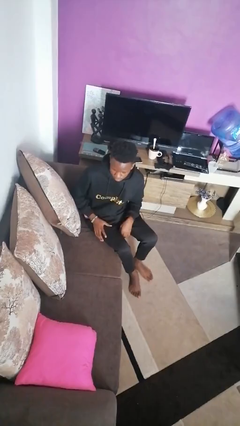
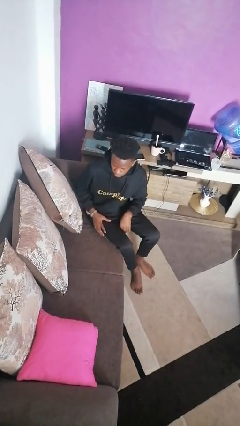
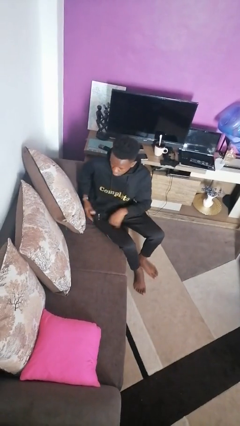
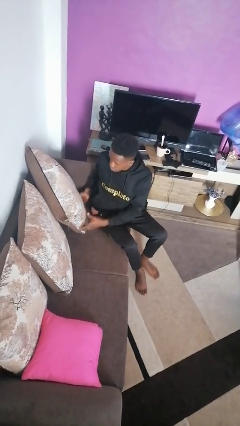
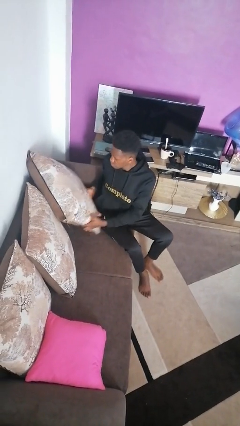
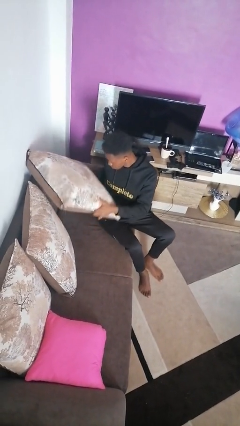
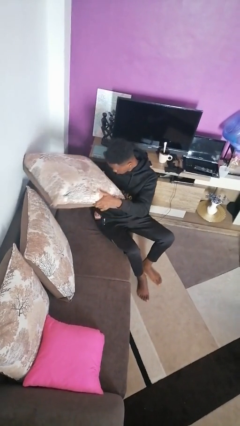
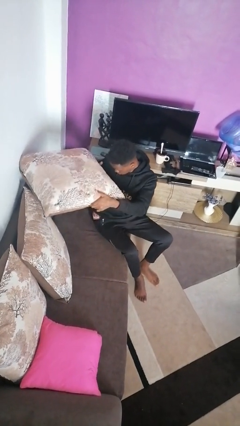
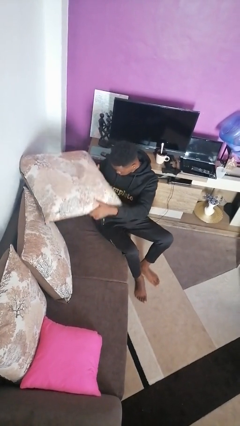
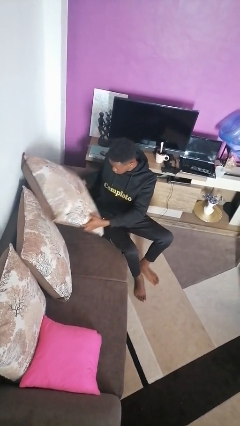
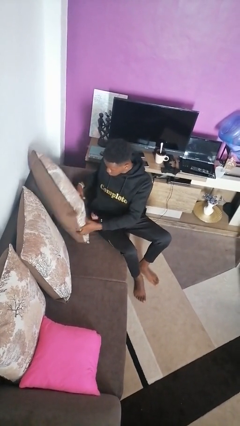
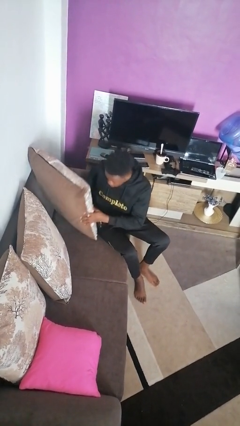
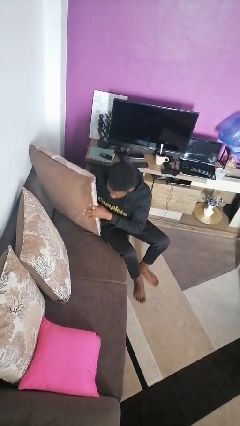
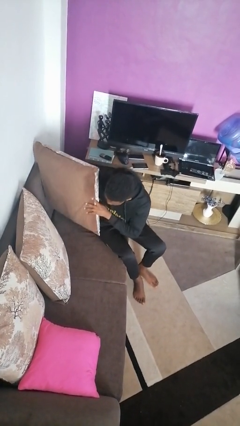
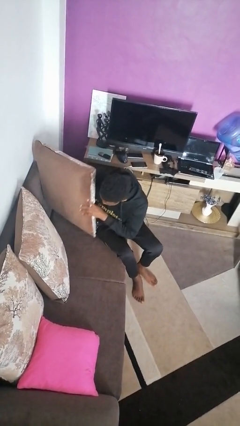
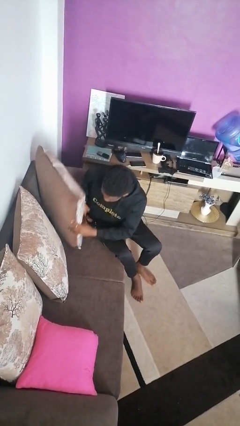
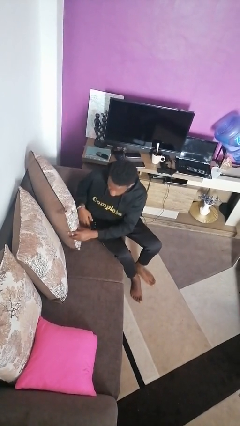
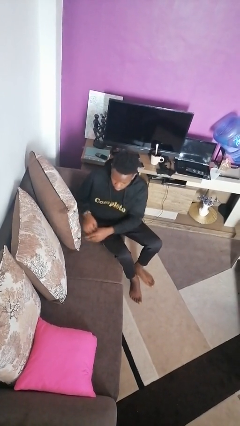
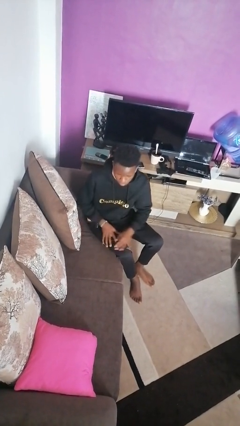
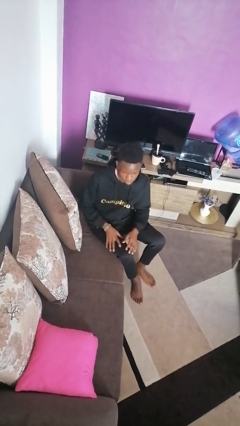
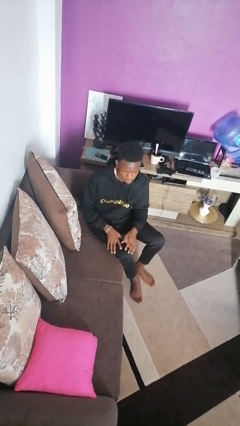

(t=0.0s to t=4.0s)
person searches in couch

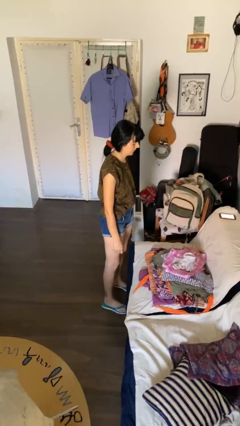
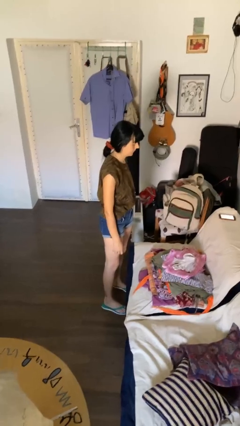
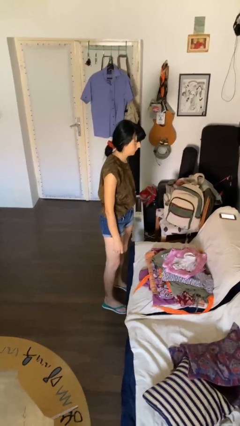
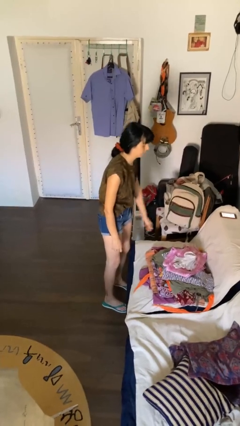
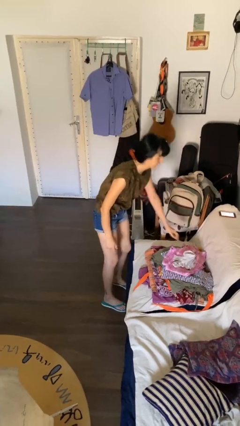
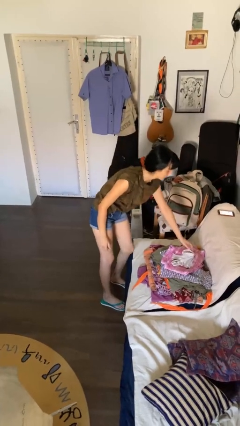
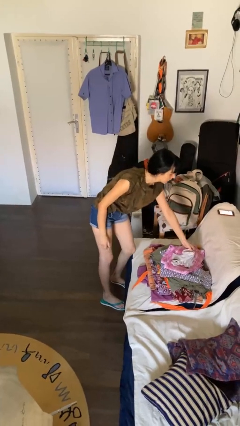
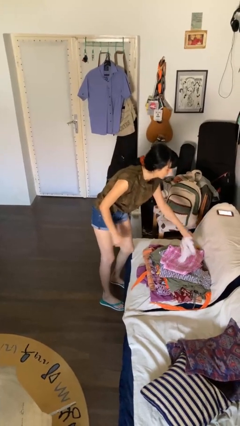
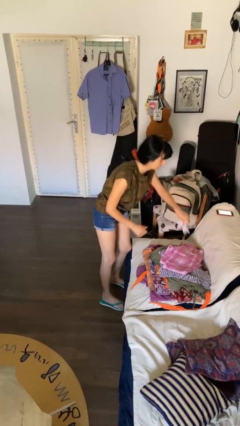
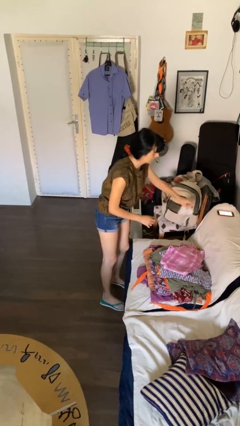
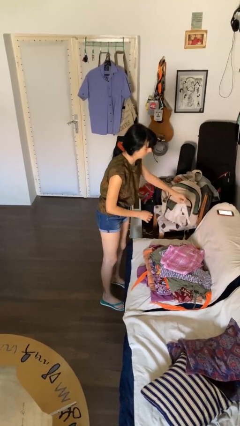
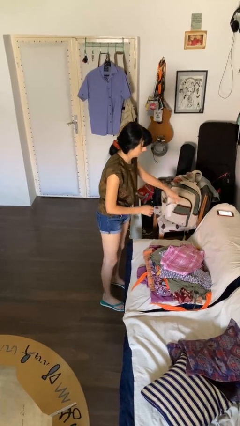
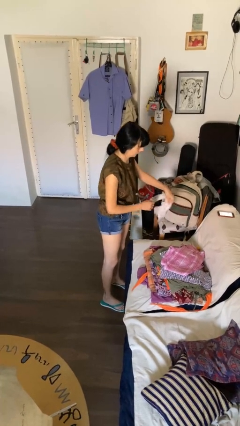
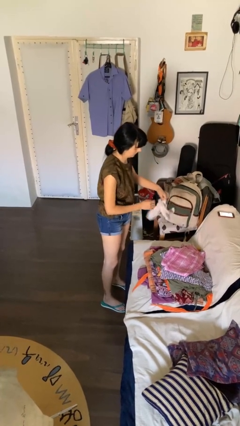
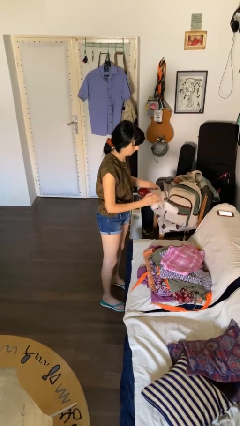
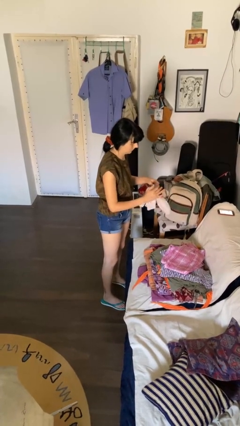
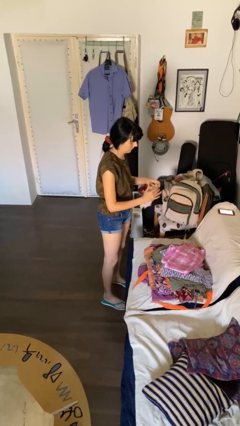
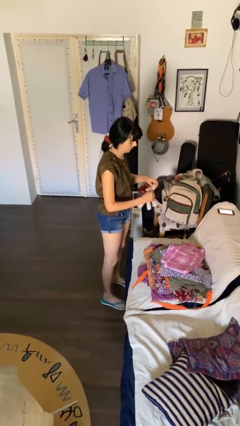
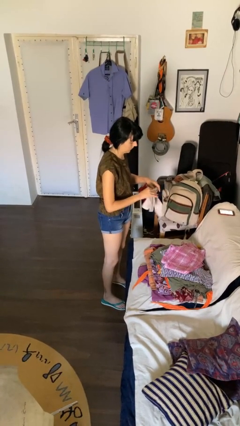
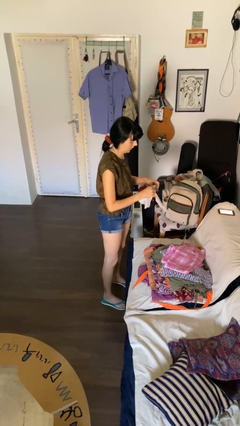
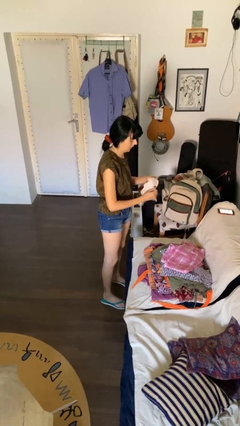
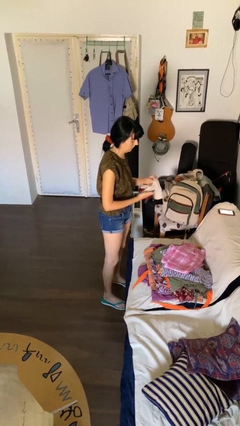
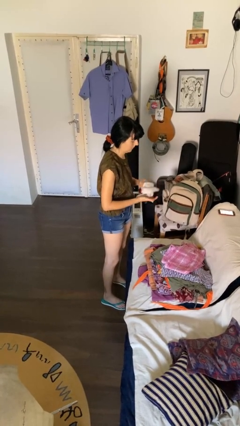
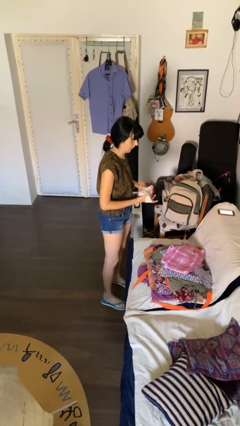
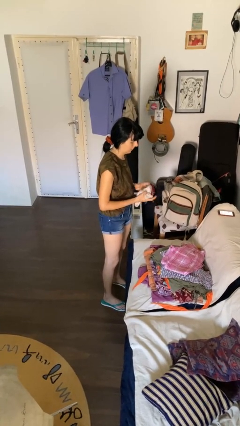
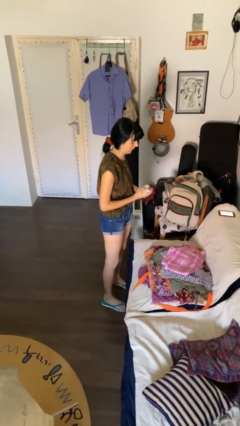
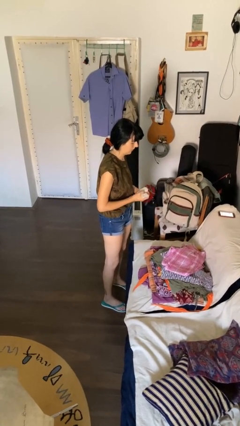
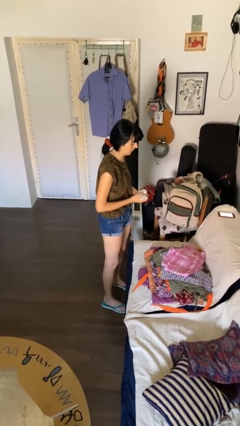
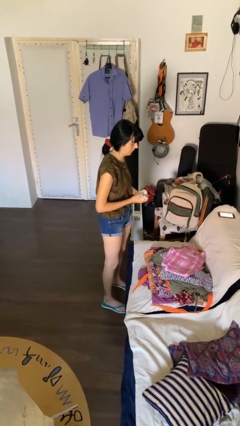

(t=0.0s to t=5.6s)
person folds socks

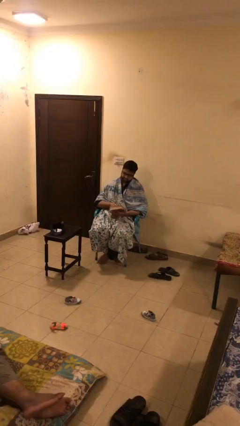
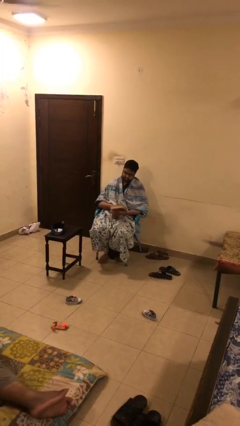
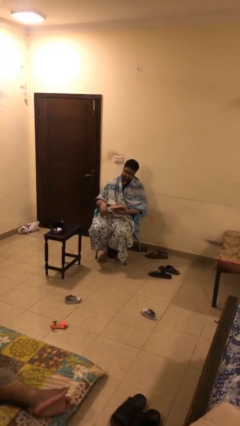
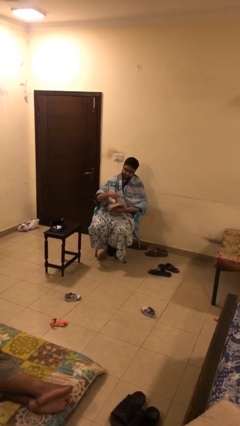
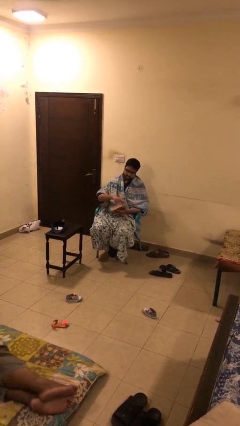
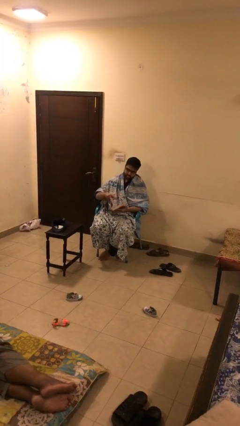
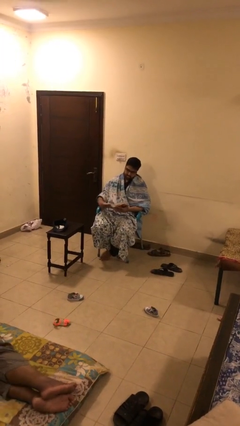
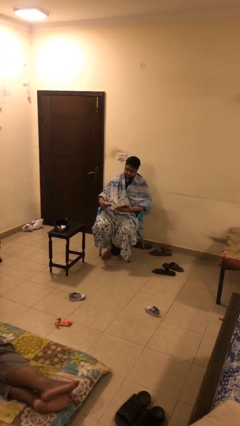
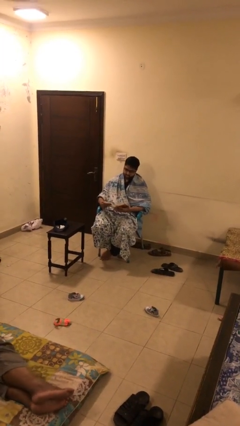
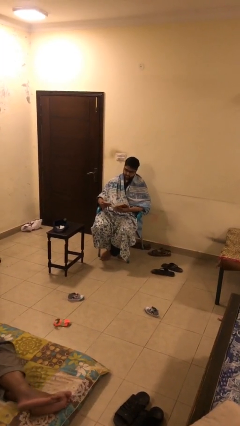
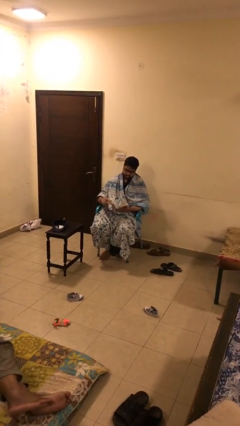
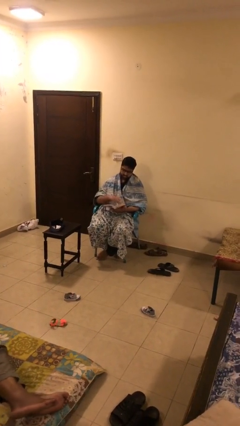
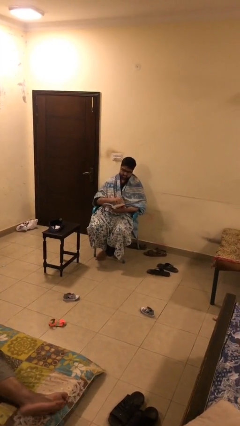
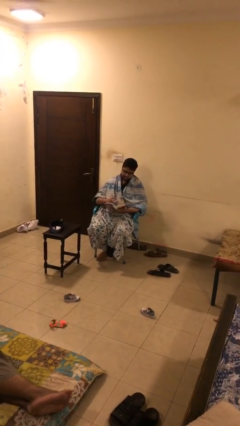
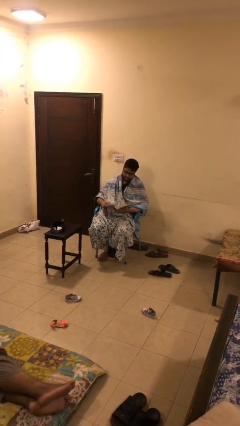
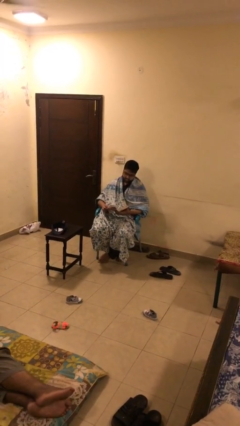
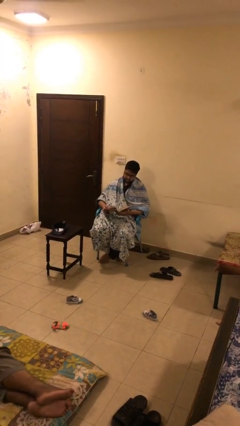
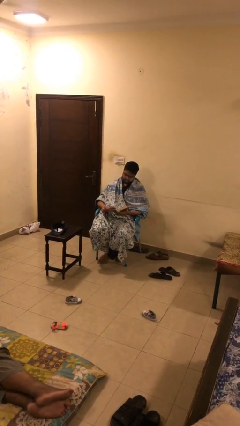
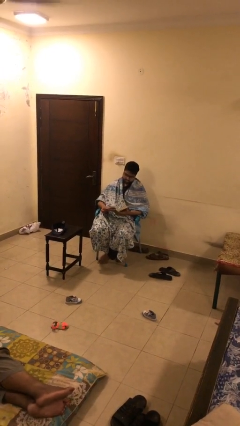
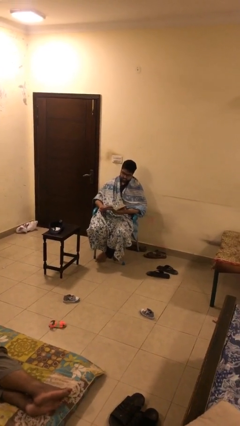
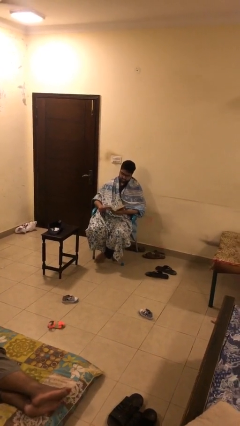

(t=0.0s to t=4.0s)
person reads document

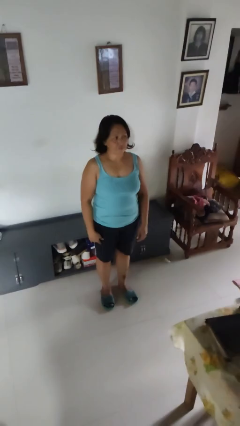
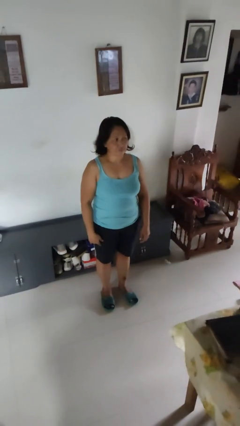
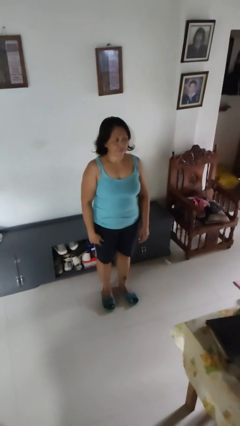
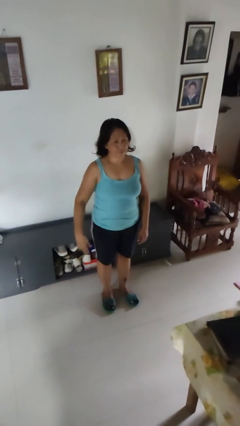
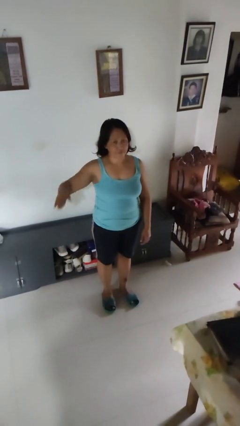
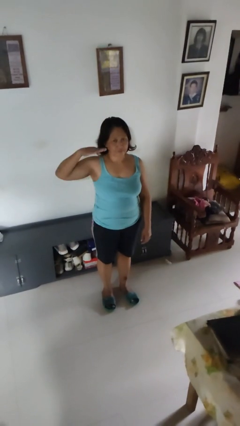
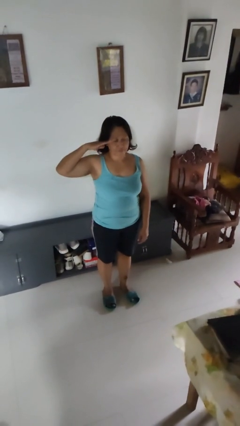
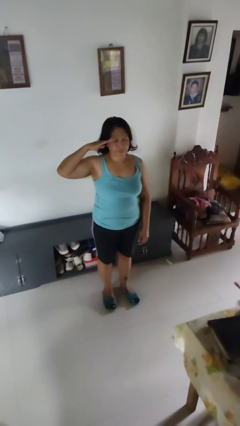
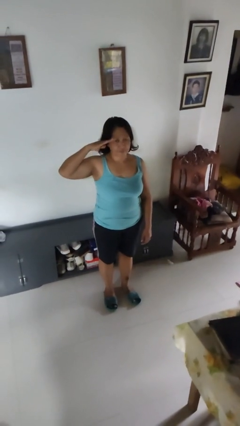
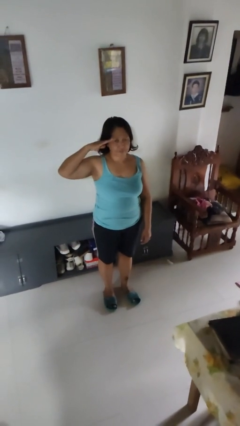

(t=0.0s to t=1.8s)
person salutes

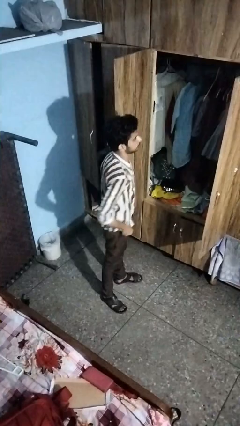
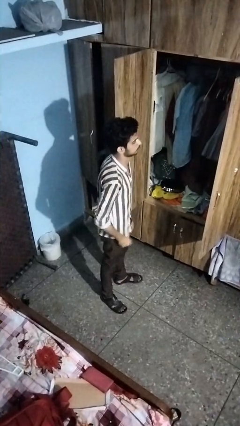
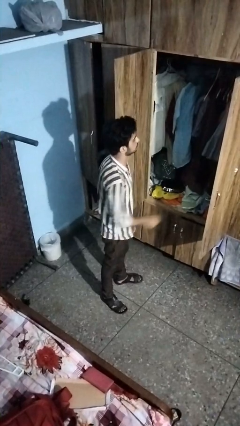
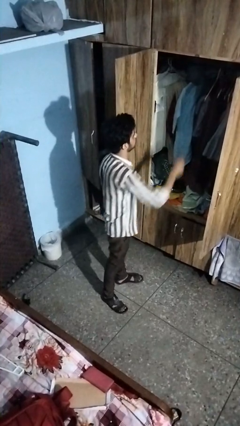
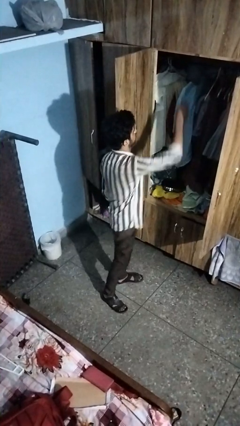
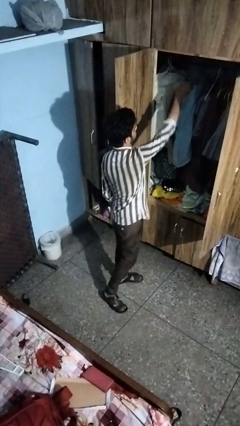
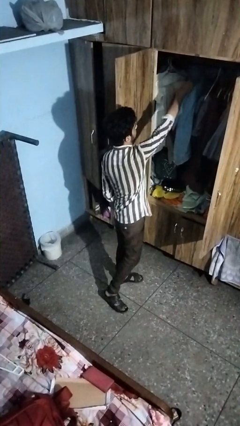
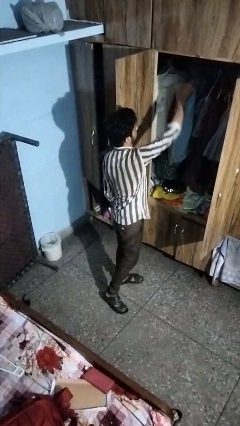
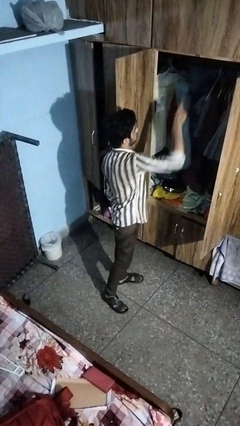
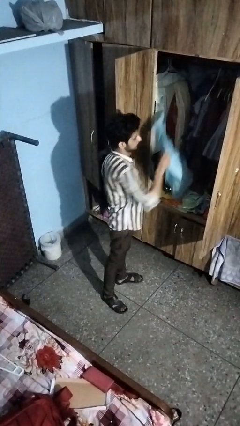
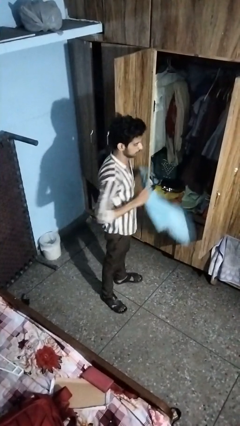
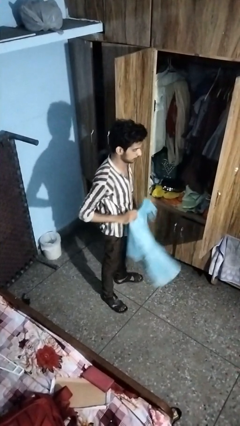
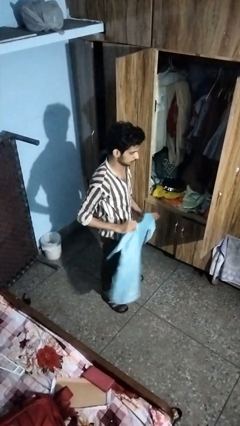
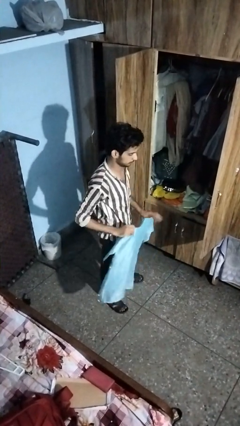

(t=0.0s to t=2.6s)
person takes clothes from closet
